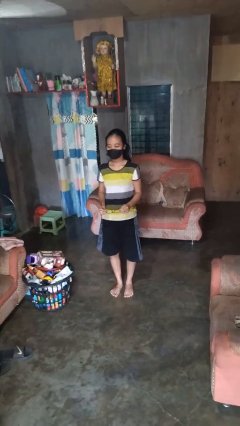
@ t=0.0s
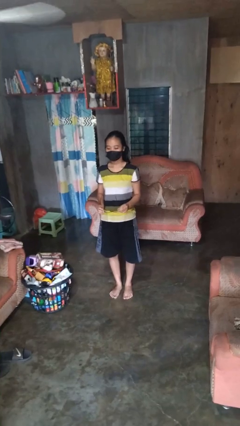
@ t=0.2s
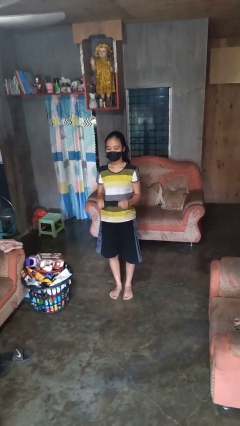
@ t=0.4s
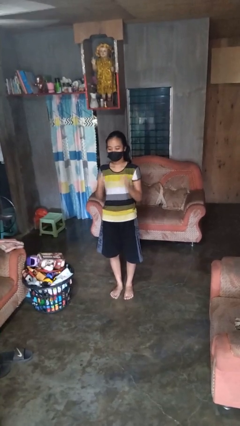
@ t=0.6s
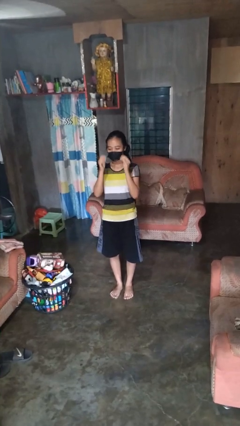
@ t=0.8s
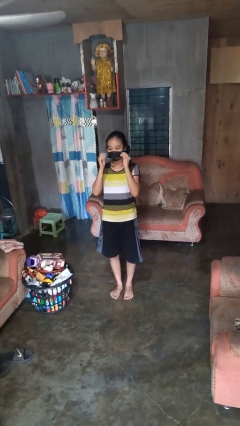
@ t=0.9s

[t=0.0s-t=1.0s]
person puts on glasses

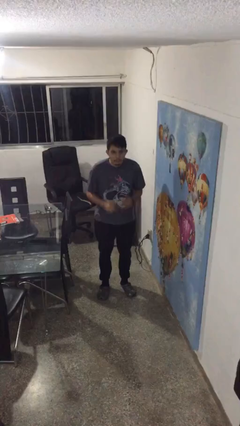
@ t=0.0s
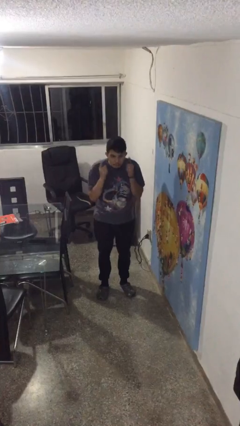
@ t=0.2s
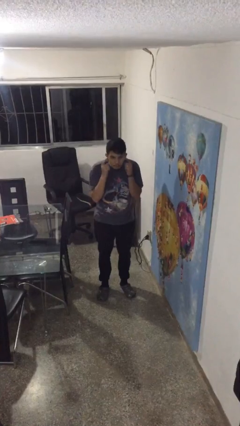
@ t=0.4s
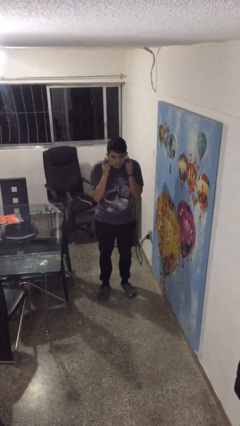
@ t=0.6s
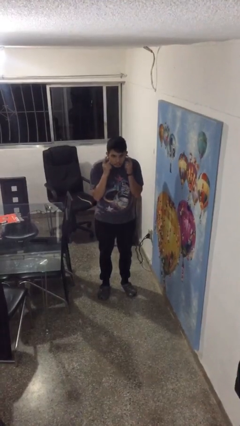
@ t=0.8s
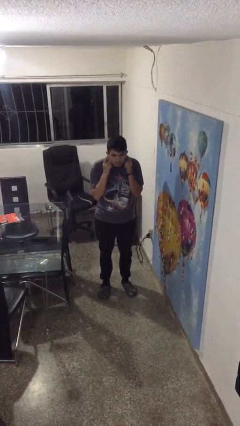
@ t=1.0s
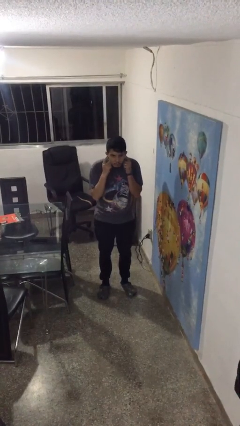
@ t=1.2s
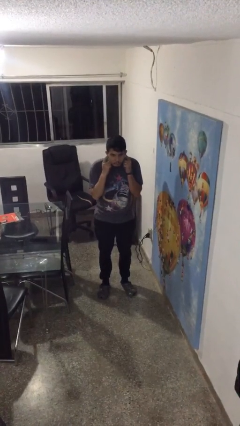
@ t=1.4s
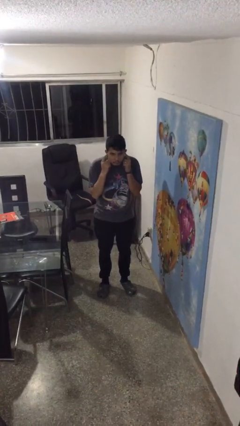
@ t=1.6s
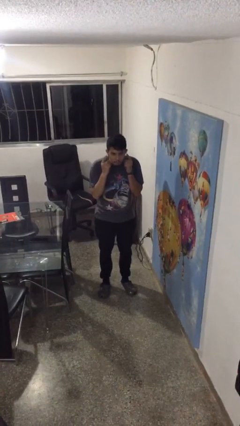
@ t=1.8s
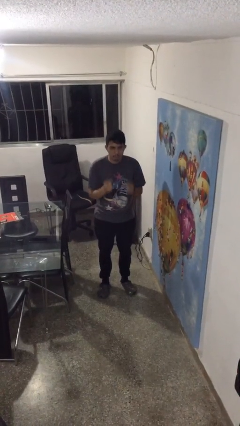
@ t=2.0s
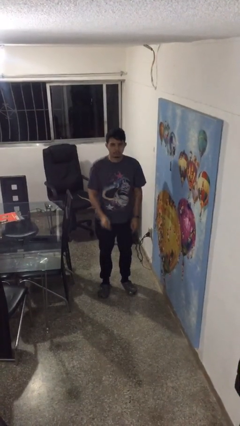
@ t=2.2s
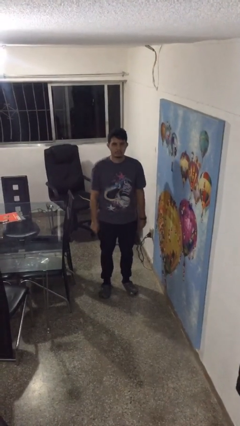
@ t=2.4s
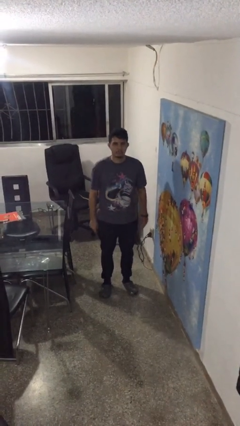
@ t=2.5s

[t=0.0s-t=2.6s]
person gestures listen closely

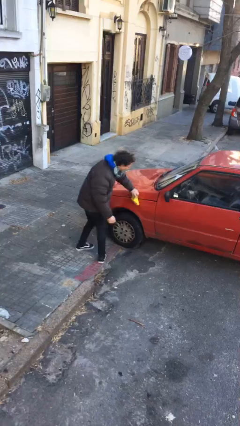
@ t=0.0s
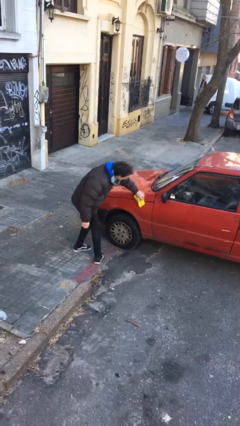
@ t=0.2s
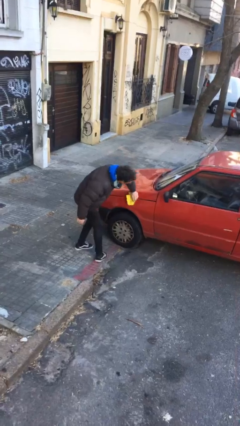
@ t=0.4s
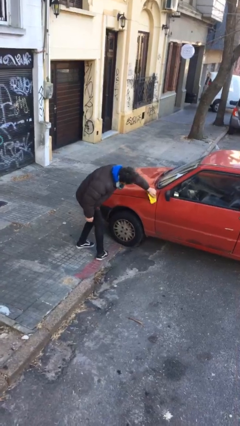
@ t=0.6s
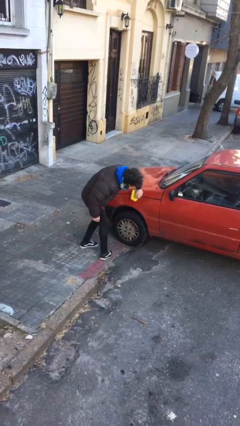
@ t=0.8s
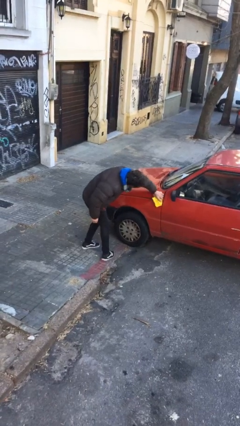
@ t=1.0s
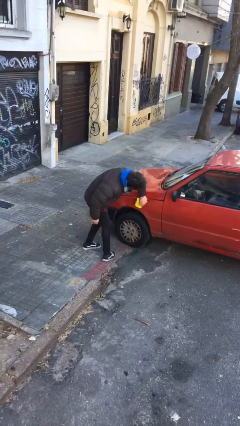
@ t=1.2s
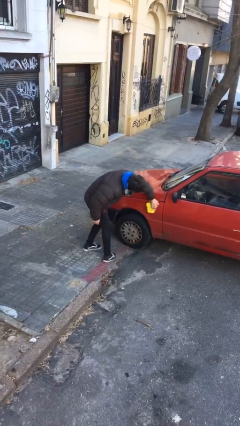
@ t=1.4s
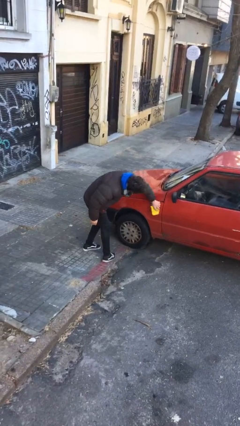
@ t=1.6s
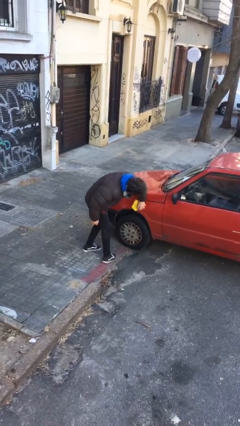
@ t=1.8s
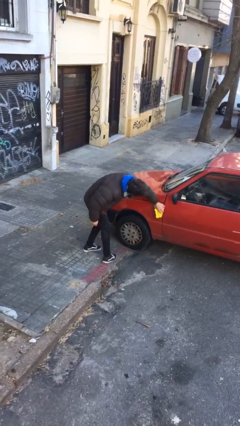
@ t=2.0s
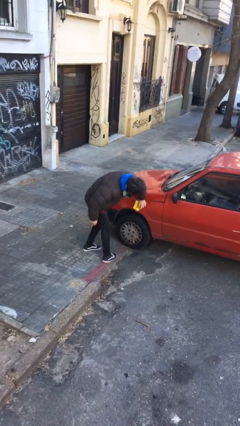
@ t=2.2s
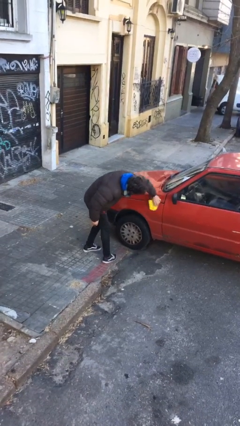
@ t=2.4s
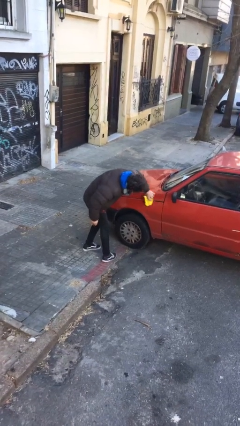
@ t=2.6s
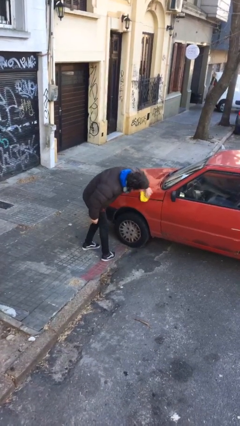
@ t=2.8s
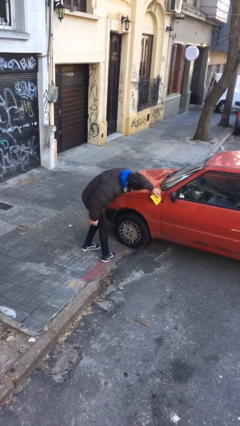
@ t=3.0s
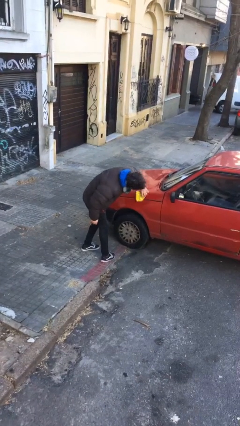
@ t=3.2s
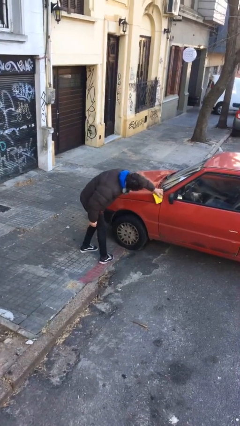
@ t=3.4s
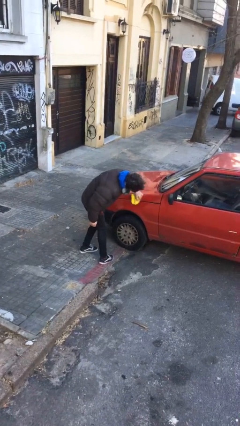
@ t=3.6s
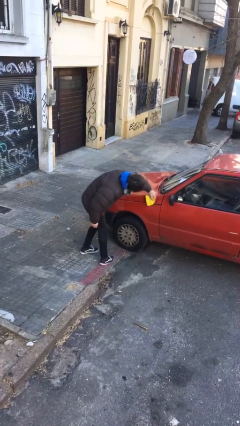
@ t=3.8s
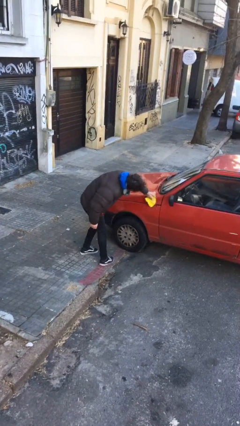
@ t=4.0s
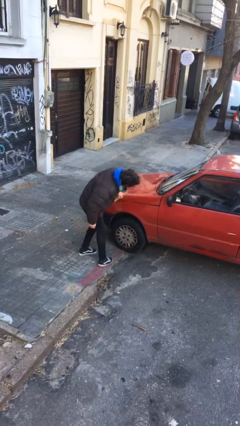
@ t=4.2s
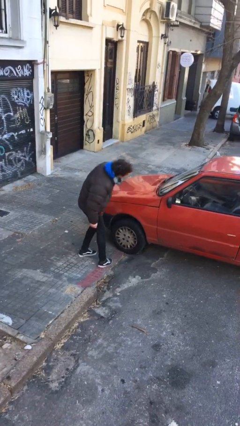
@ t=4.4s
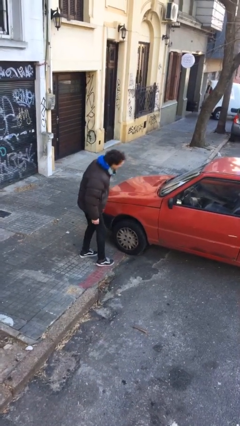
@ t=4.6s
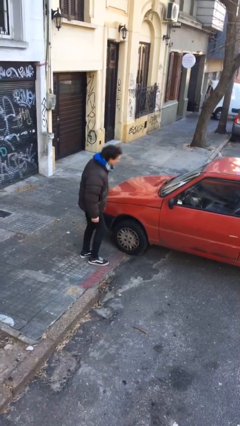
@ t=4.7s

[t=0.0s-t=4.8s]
person polishes car with rag

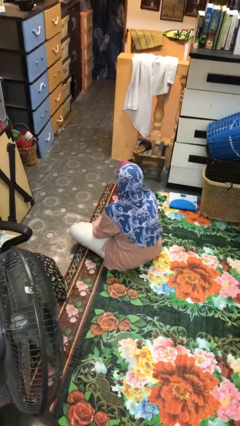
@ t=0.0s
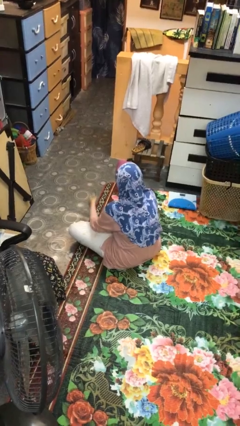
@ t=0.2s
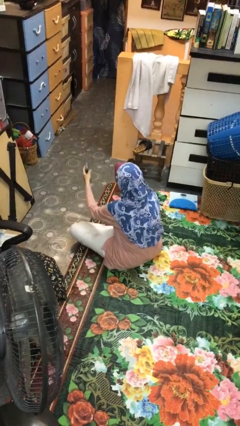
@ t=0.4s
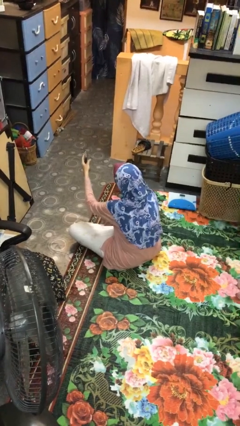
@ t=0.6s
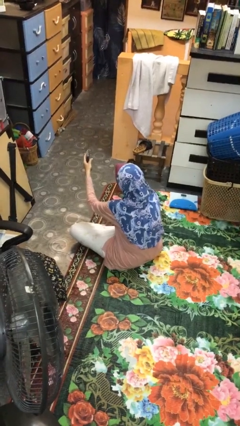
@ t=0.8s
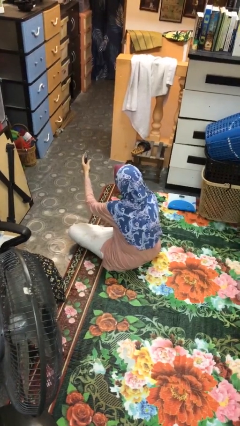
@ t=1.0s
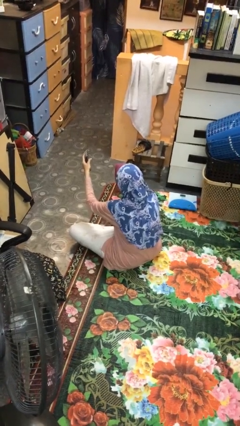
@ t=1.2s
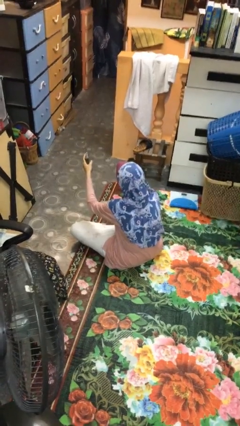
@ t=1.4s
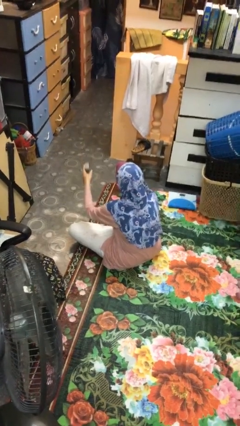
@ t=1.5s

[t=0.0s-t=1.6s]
person uses television remote

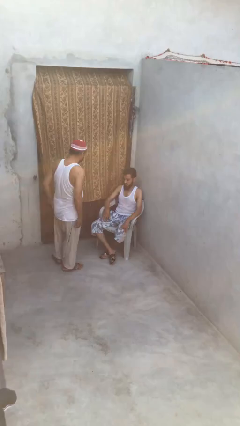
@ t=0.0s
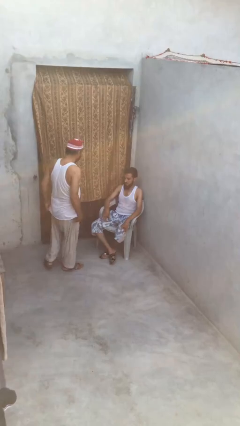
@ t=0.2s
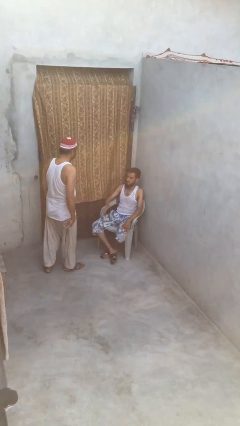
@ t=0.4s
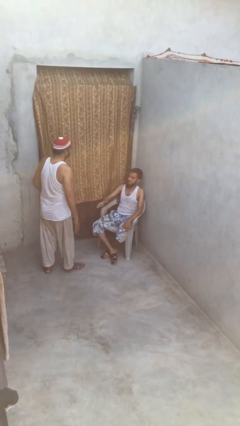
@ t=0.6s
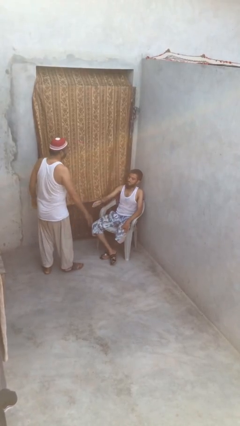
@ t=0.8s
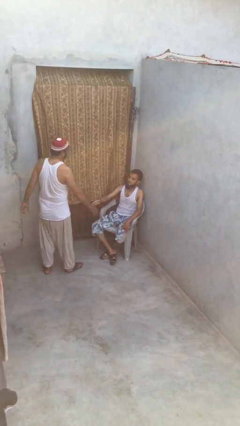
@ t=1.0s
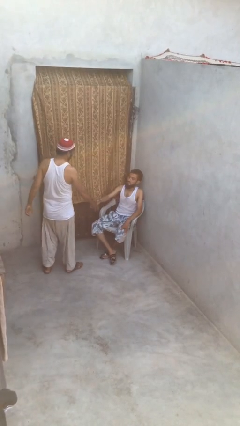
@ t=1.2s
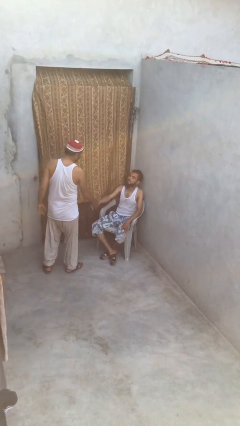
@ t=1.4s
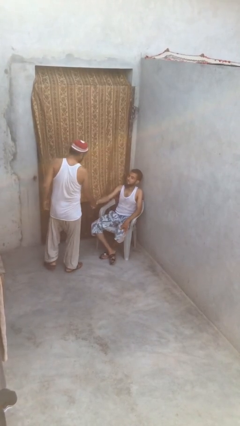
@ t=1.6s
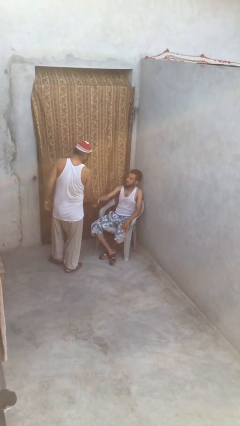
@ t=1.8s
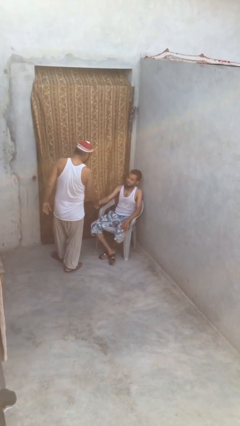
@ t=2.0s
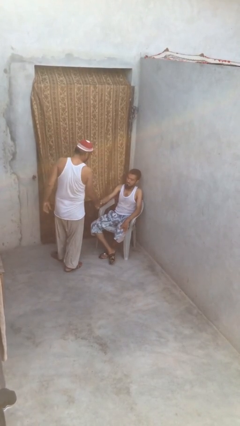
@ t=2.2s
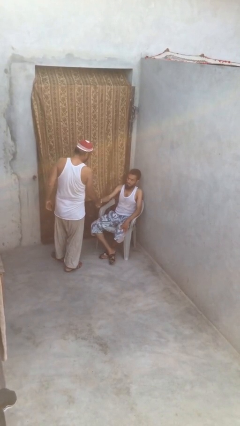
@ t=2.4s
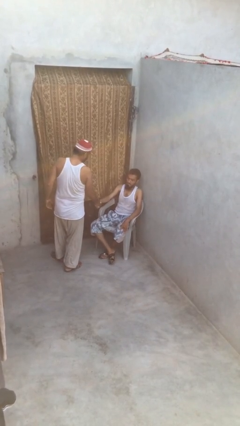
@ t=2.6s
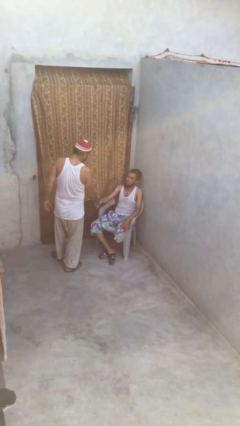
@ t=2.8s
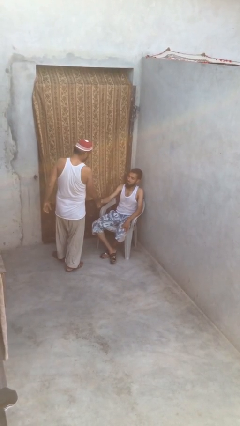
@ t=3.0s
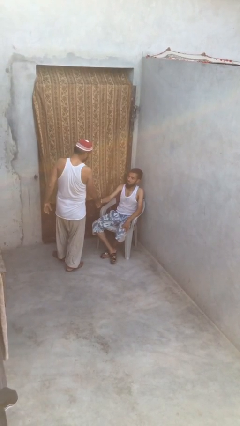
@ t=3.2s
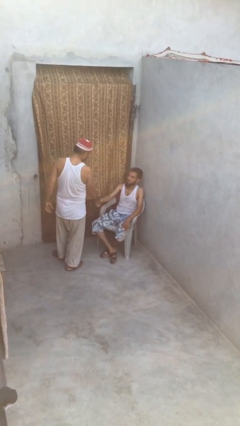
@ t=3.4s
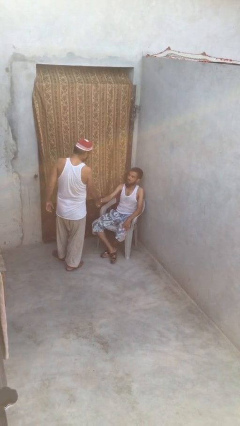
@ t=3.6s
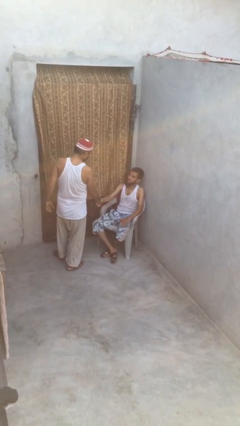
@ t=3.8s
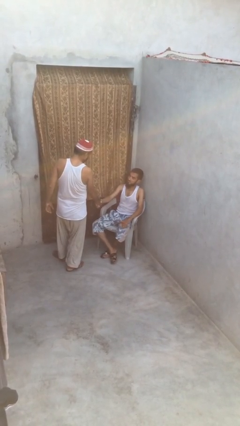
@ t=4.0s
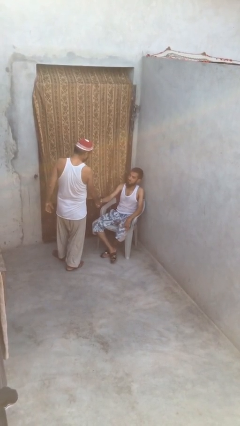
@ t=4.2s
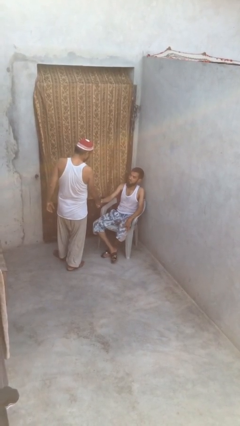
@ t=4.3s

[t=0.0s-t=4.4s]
person shakes hand

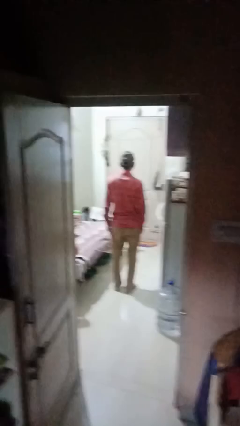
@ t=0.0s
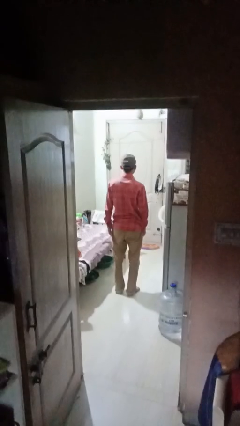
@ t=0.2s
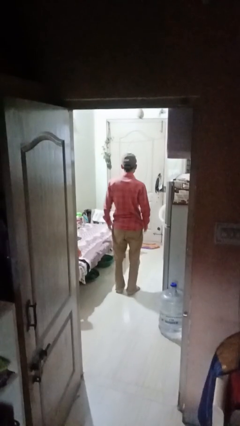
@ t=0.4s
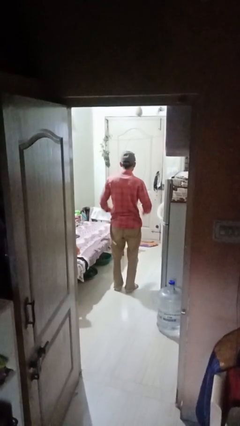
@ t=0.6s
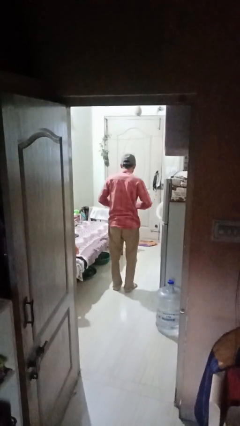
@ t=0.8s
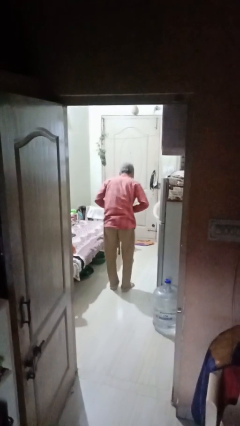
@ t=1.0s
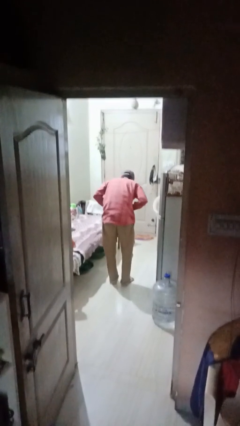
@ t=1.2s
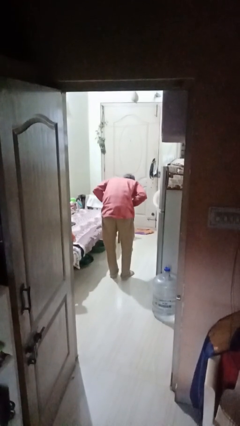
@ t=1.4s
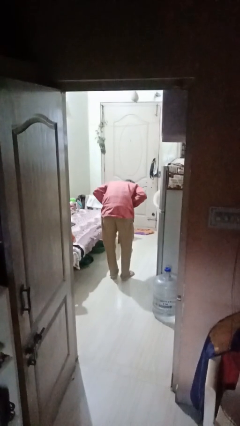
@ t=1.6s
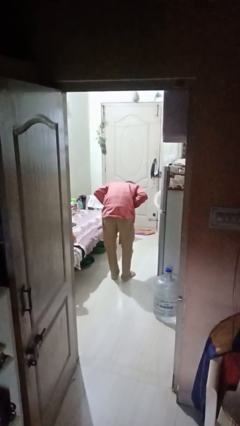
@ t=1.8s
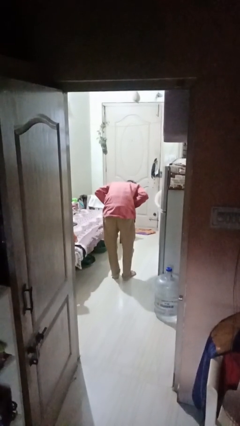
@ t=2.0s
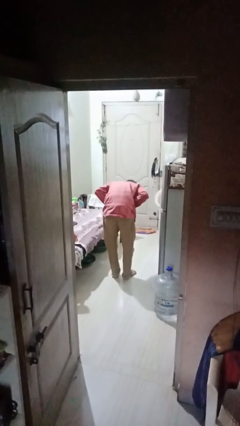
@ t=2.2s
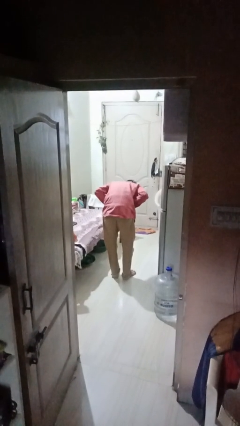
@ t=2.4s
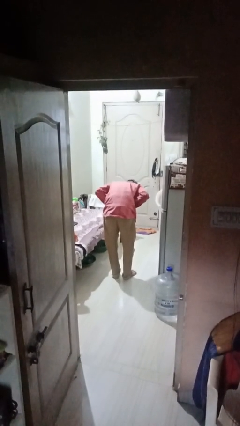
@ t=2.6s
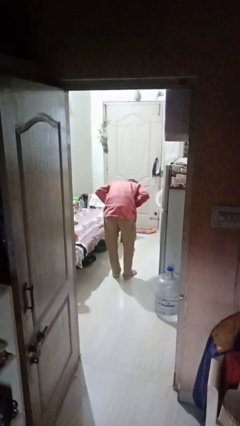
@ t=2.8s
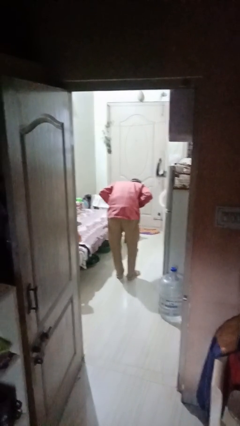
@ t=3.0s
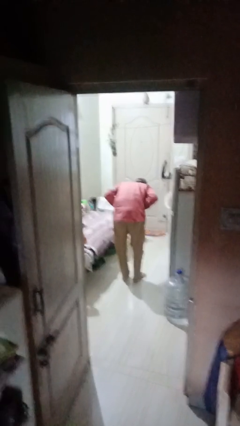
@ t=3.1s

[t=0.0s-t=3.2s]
person bows

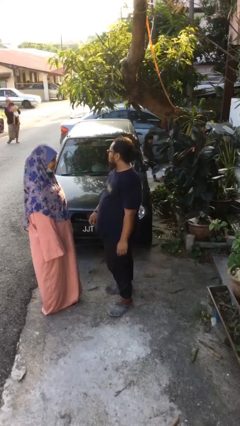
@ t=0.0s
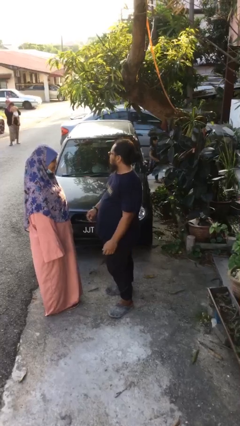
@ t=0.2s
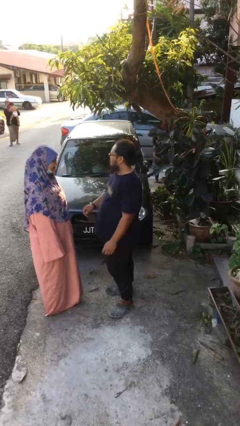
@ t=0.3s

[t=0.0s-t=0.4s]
person touches face of person
